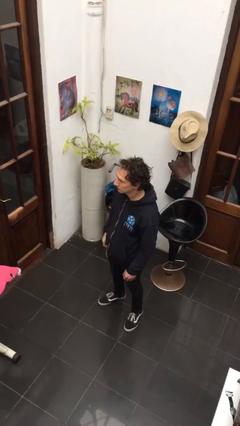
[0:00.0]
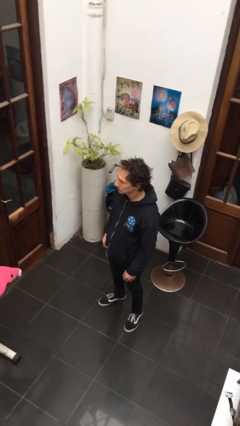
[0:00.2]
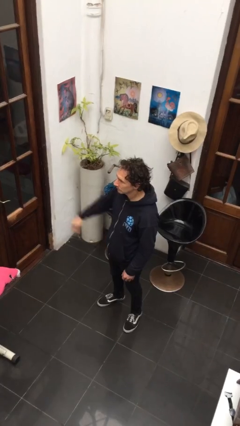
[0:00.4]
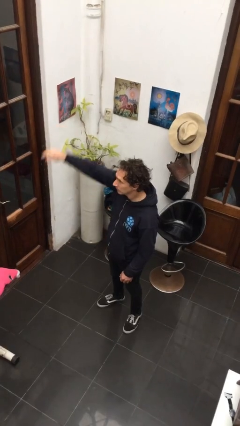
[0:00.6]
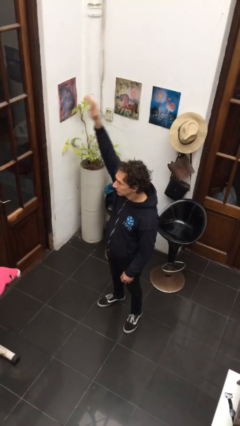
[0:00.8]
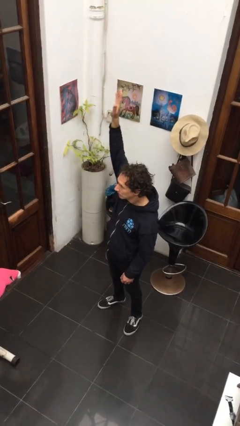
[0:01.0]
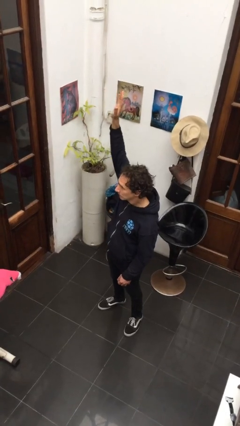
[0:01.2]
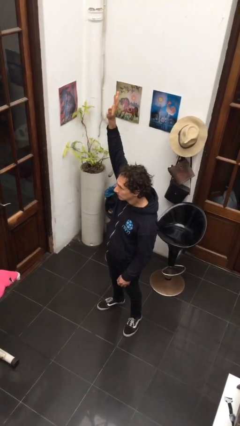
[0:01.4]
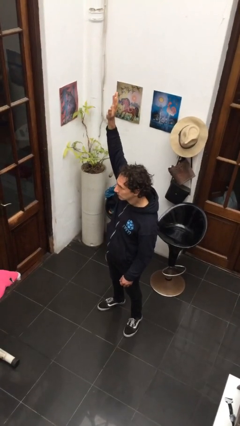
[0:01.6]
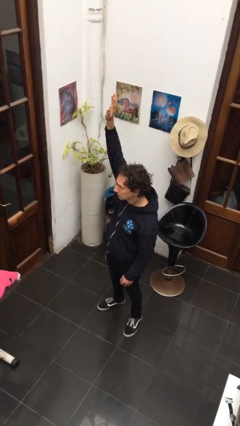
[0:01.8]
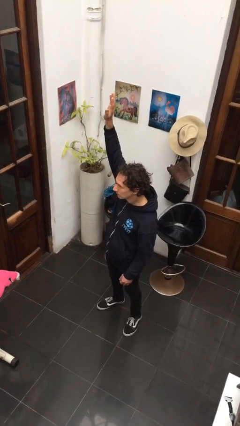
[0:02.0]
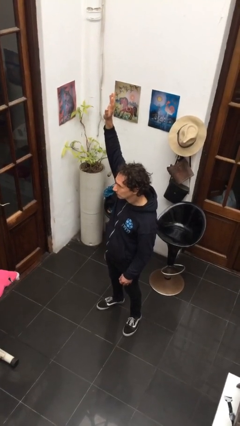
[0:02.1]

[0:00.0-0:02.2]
person gestures raise hand

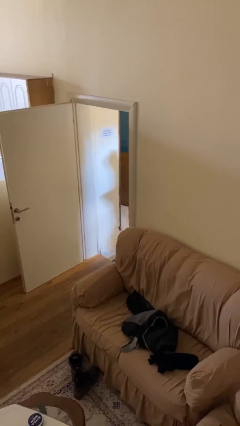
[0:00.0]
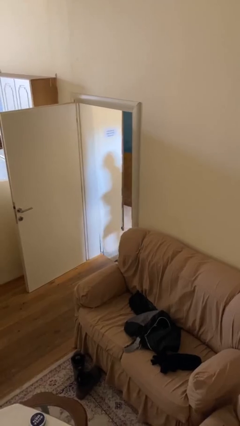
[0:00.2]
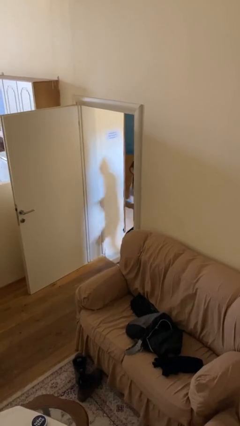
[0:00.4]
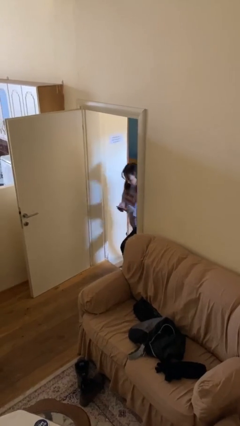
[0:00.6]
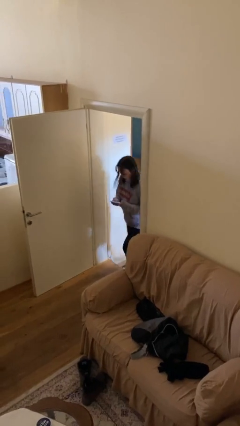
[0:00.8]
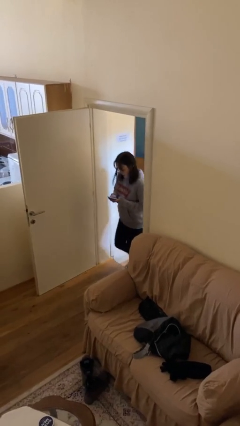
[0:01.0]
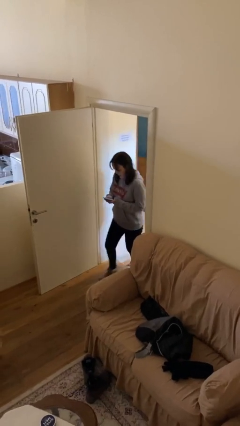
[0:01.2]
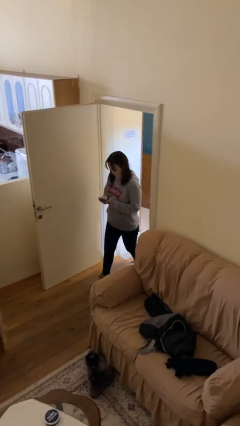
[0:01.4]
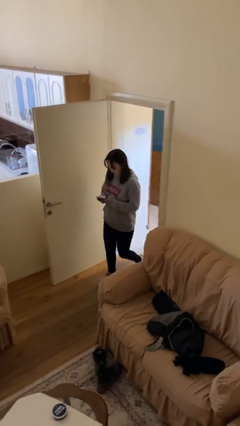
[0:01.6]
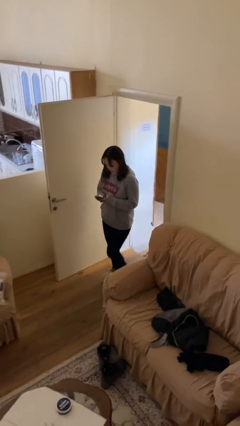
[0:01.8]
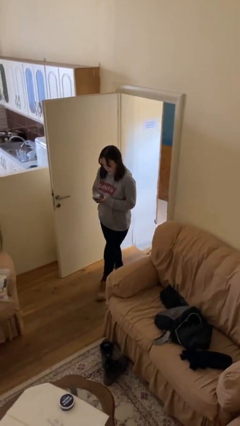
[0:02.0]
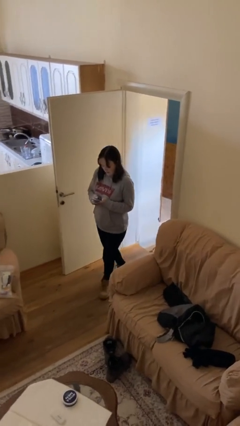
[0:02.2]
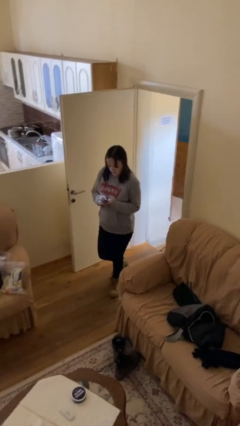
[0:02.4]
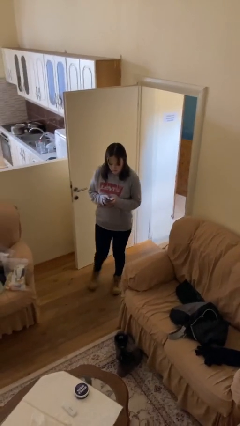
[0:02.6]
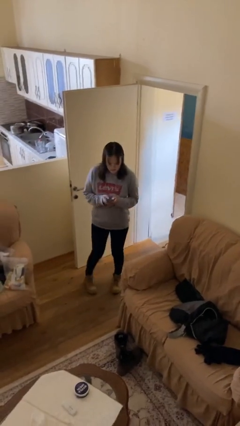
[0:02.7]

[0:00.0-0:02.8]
person enters scene through structure

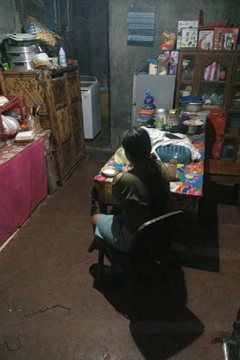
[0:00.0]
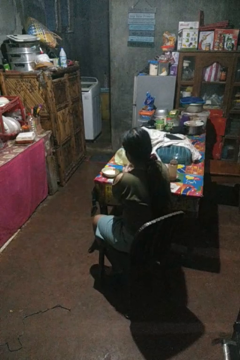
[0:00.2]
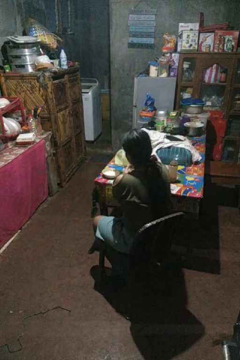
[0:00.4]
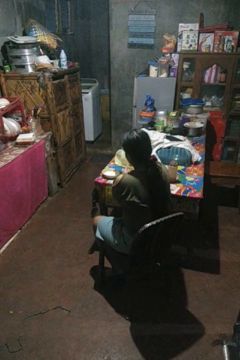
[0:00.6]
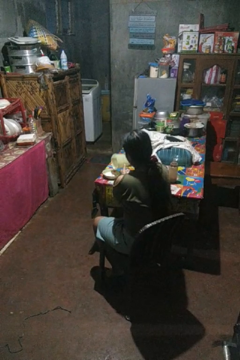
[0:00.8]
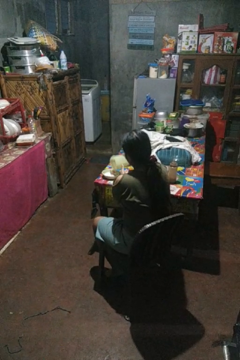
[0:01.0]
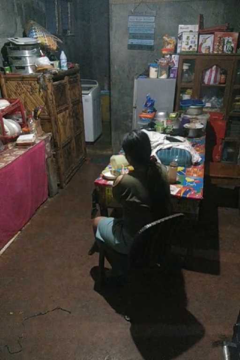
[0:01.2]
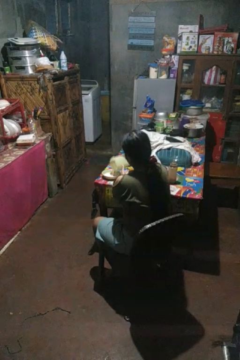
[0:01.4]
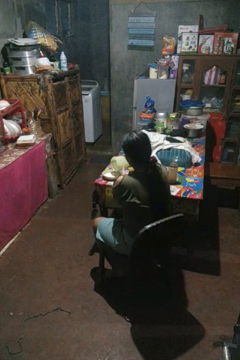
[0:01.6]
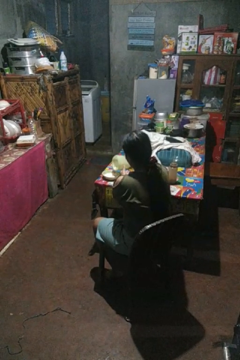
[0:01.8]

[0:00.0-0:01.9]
person pours into bowl

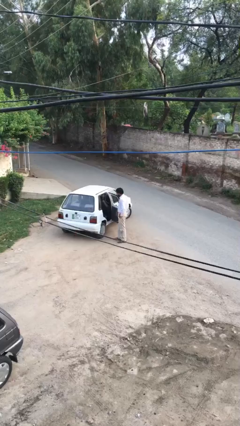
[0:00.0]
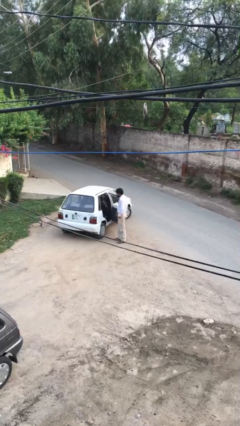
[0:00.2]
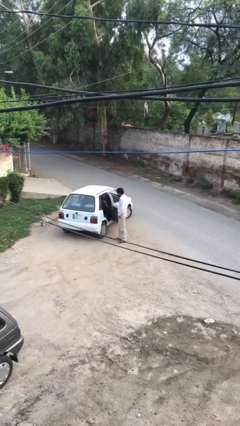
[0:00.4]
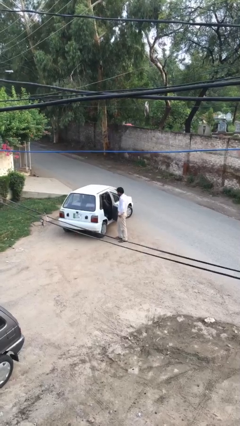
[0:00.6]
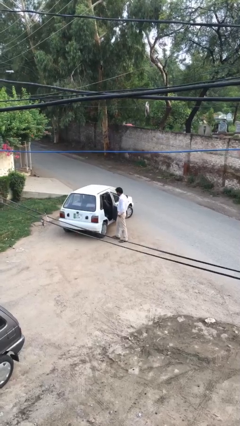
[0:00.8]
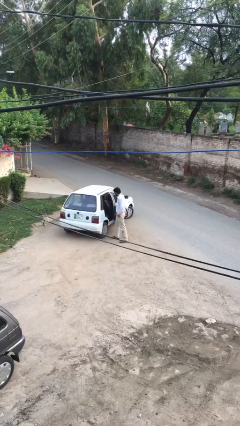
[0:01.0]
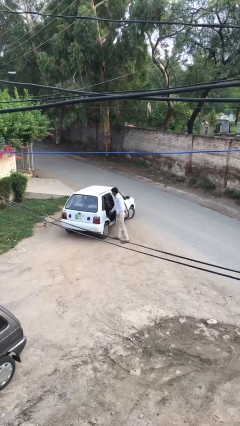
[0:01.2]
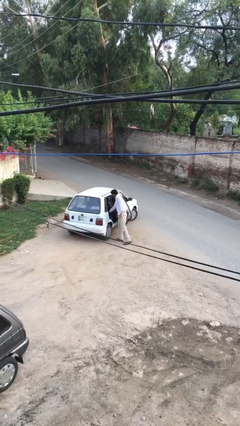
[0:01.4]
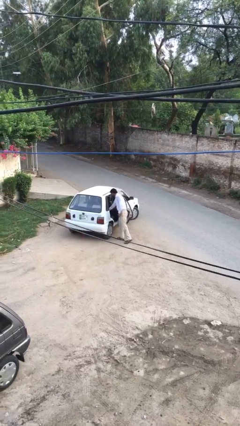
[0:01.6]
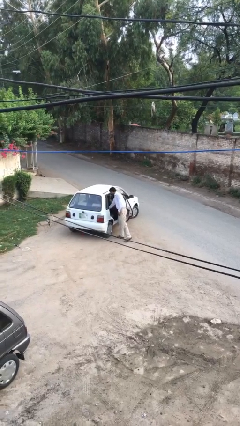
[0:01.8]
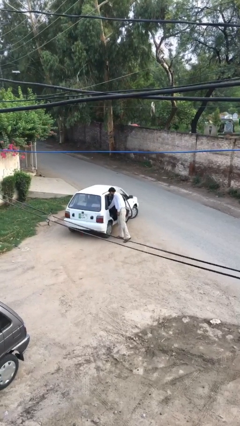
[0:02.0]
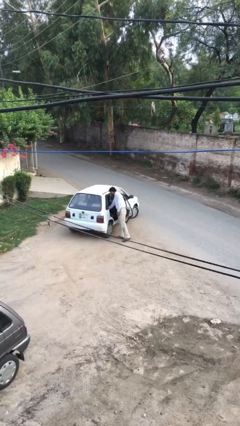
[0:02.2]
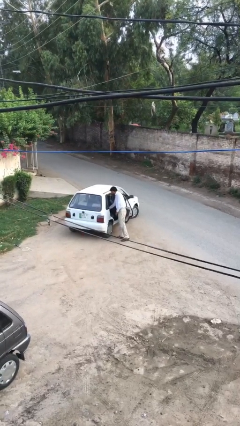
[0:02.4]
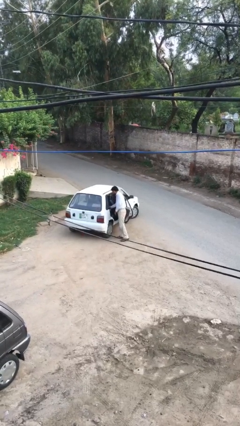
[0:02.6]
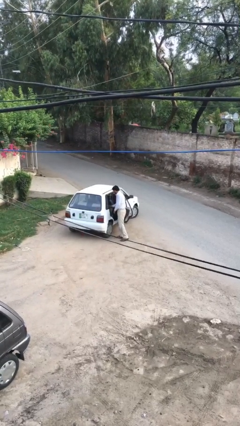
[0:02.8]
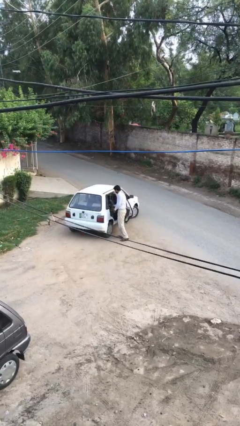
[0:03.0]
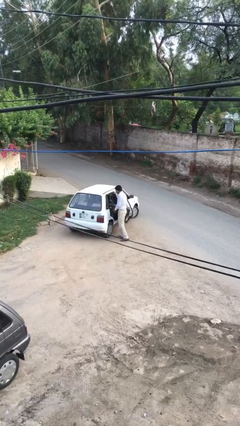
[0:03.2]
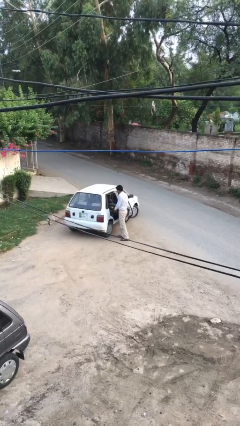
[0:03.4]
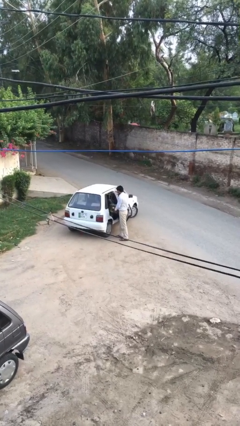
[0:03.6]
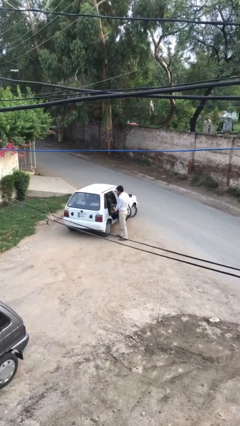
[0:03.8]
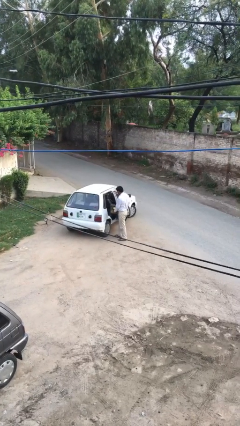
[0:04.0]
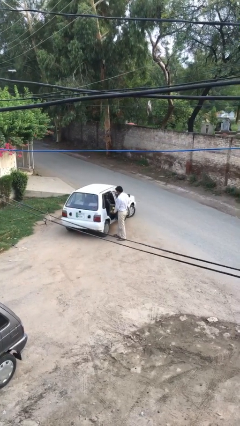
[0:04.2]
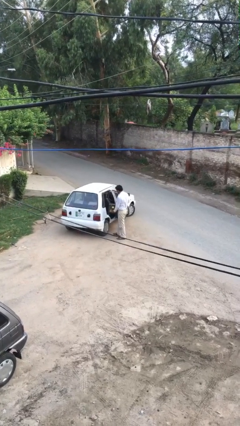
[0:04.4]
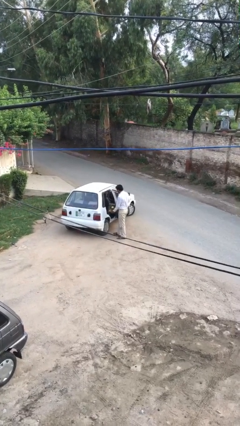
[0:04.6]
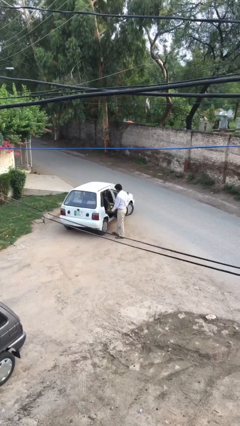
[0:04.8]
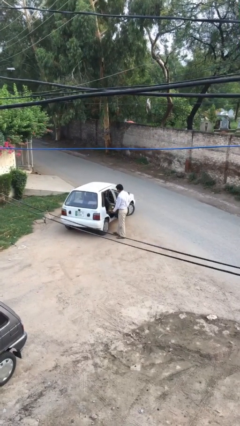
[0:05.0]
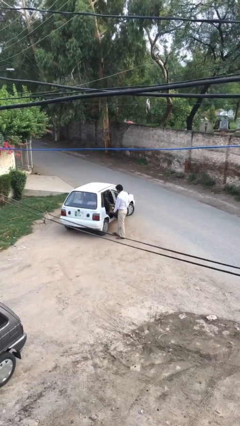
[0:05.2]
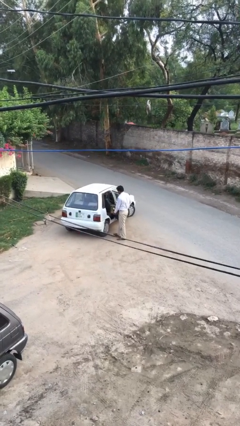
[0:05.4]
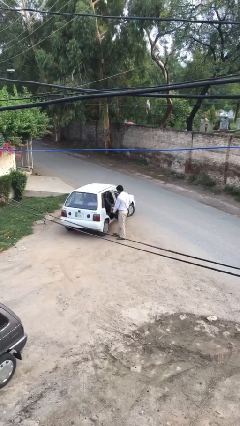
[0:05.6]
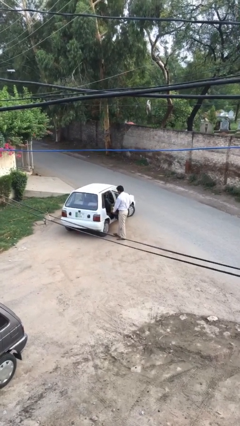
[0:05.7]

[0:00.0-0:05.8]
person unloads car

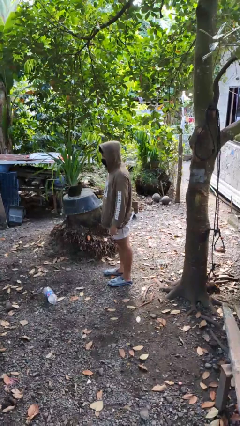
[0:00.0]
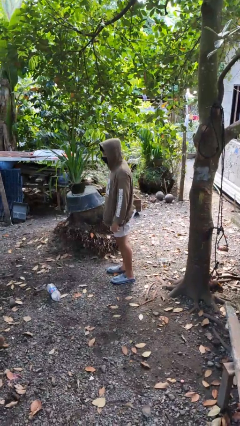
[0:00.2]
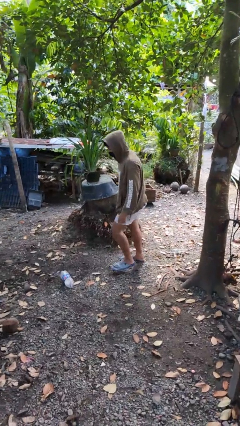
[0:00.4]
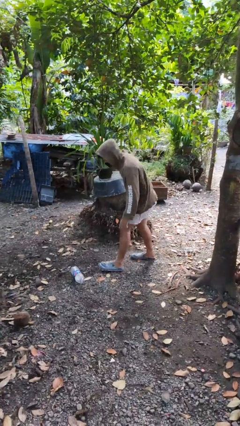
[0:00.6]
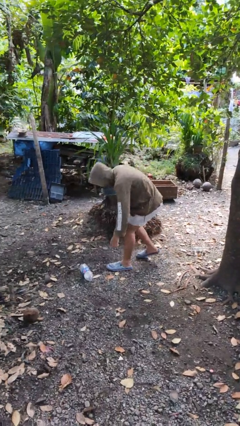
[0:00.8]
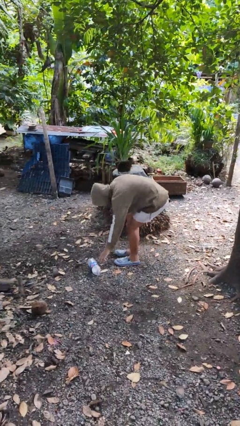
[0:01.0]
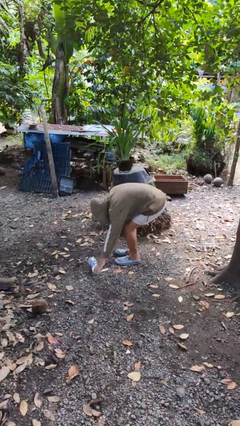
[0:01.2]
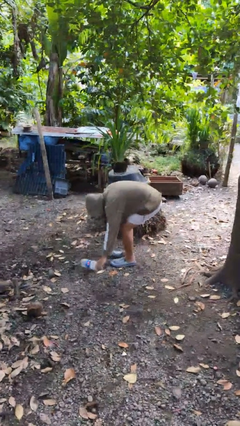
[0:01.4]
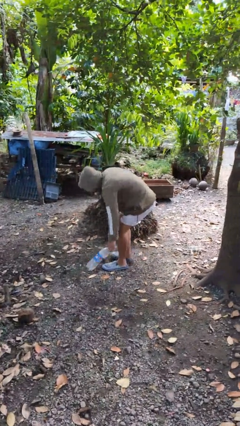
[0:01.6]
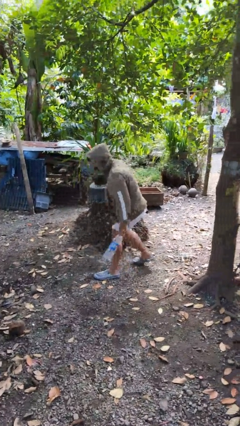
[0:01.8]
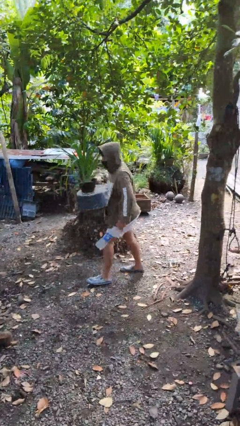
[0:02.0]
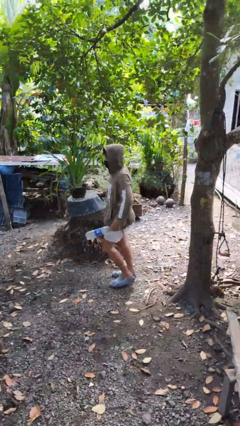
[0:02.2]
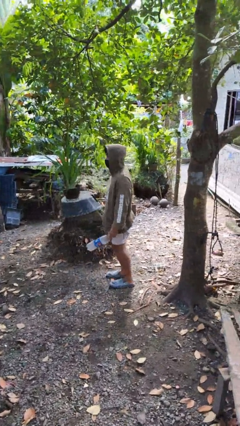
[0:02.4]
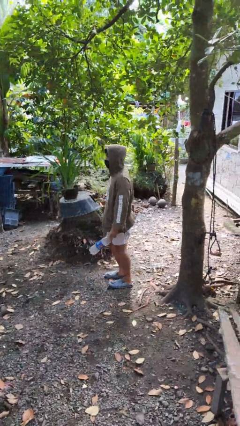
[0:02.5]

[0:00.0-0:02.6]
person picks up object from floor

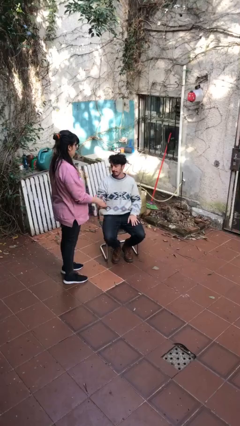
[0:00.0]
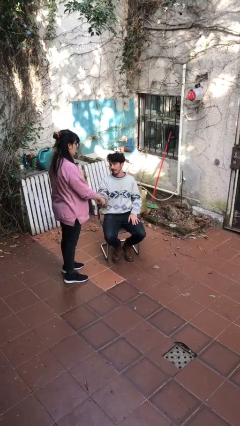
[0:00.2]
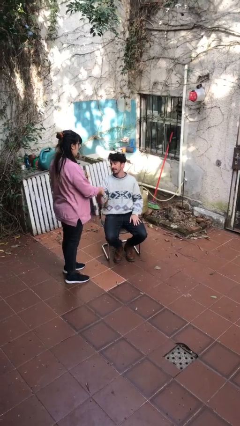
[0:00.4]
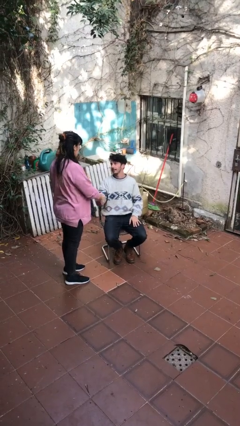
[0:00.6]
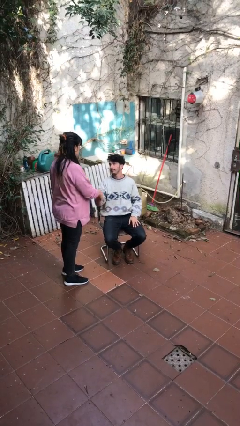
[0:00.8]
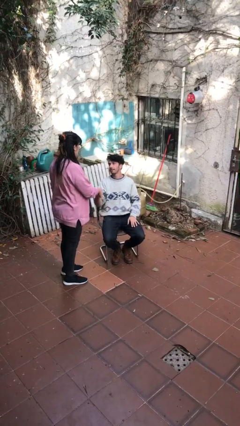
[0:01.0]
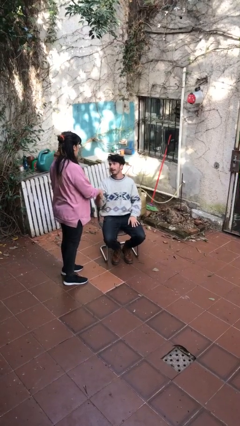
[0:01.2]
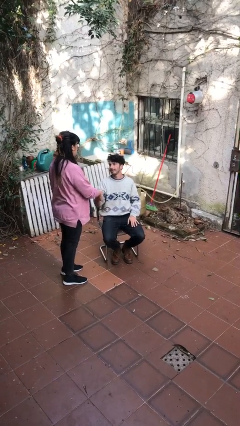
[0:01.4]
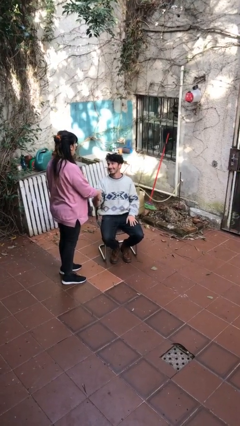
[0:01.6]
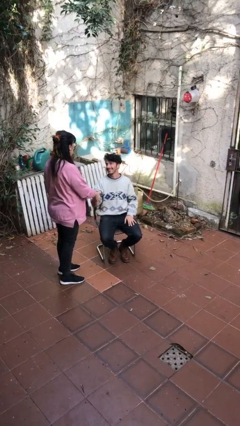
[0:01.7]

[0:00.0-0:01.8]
person shakes hand
